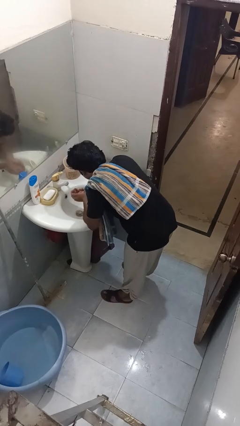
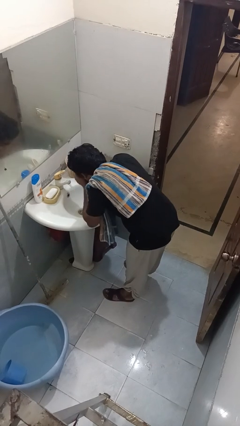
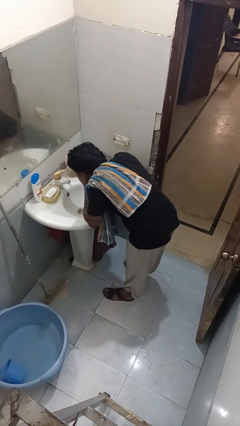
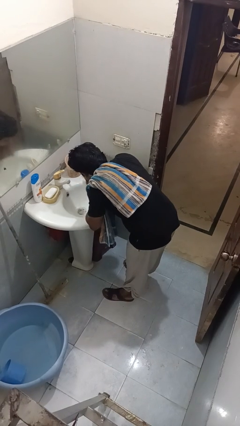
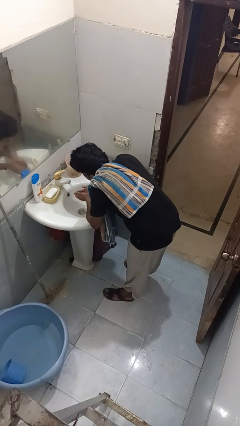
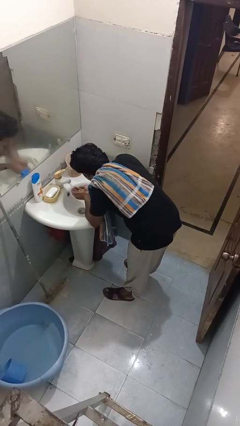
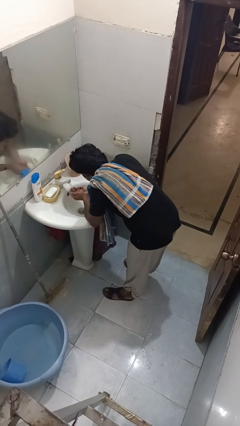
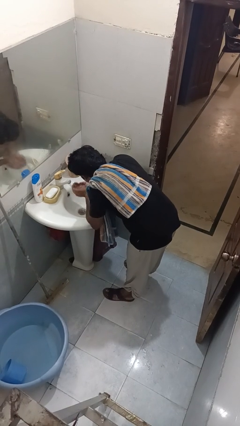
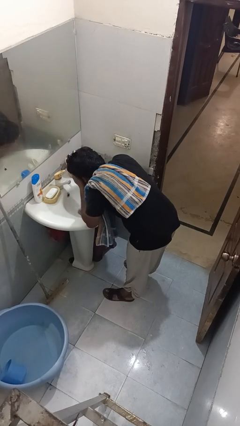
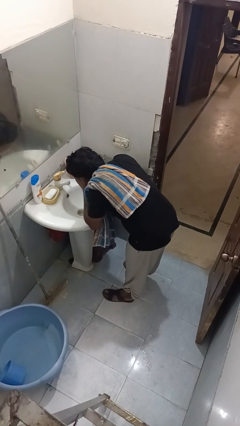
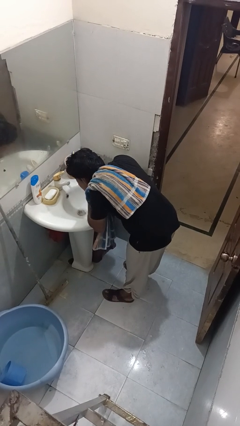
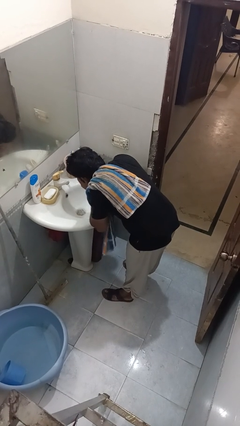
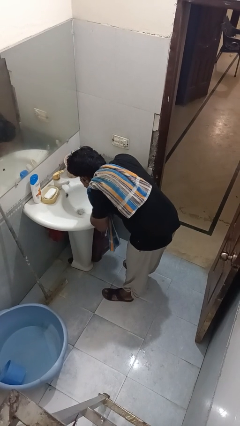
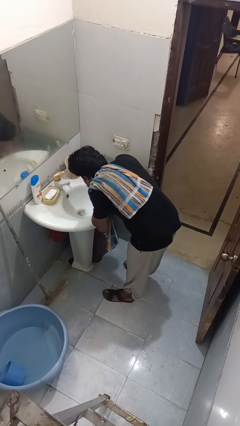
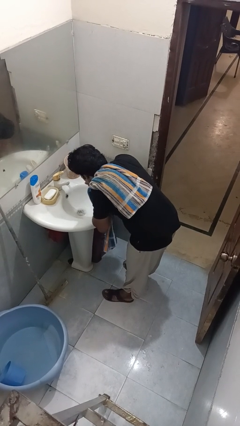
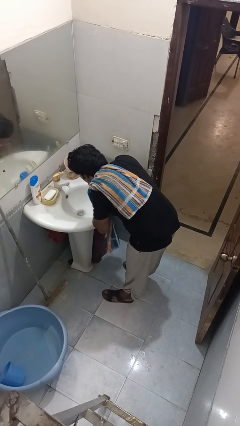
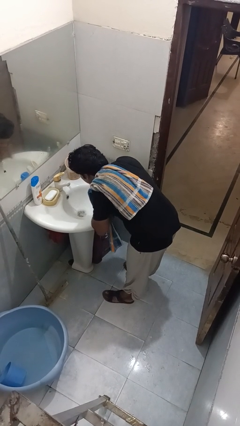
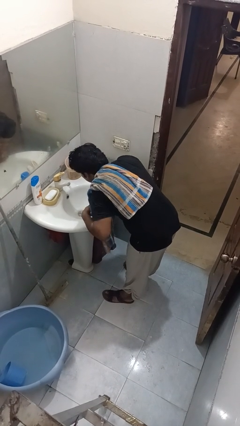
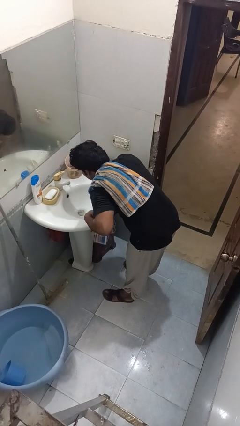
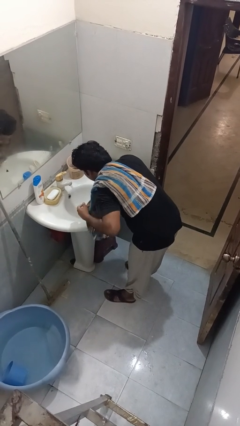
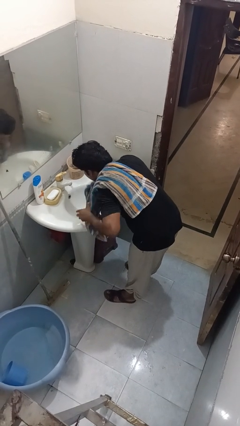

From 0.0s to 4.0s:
person washes face

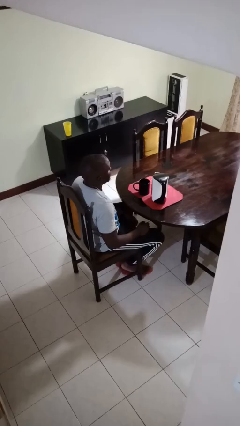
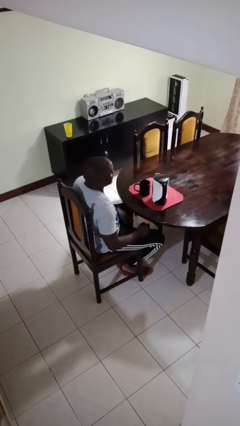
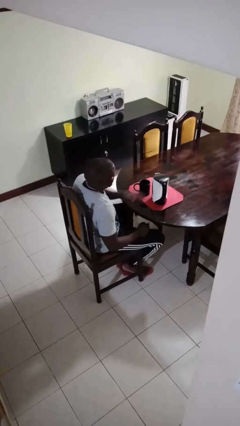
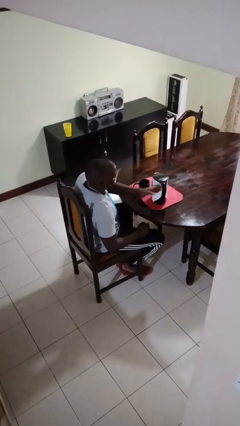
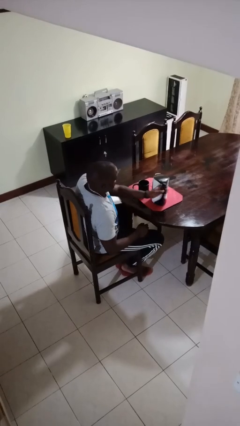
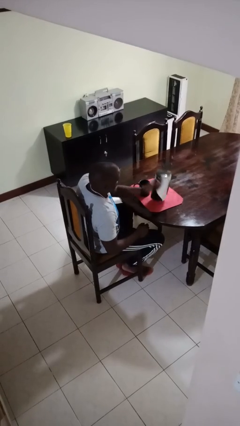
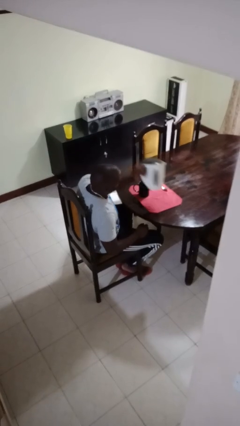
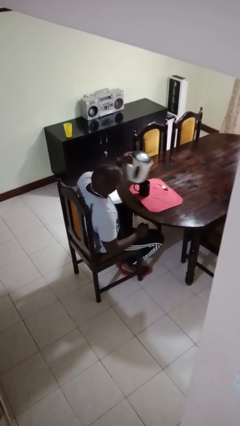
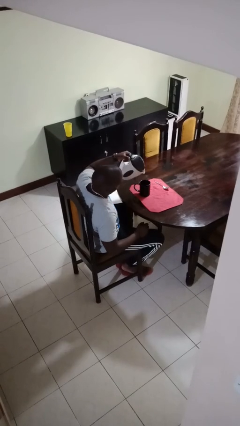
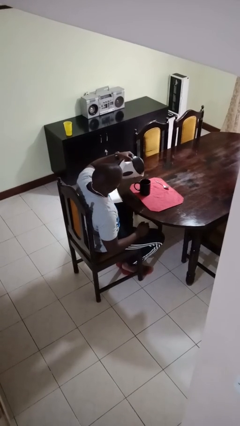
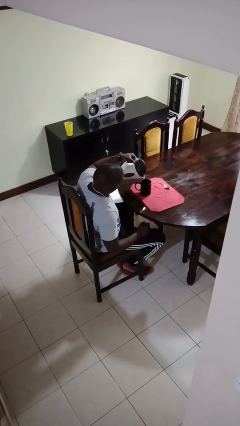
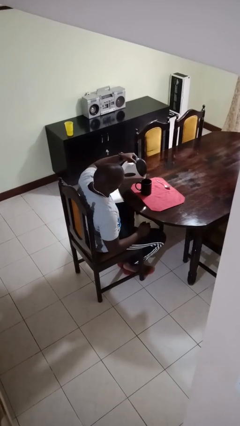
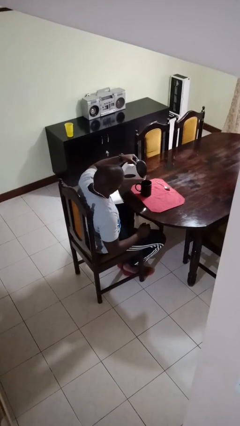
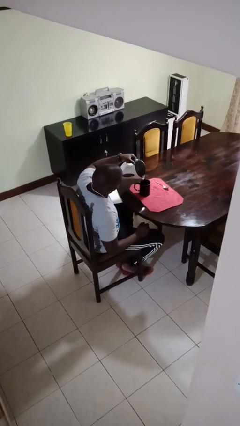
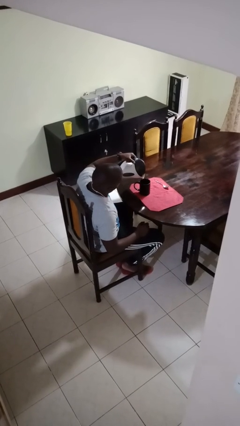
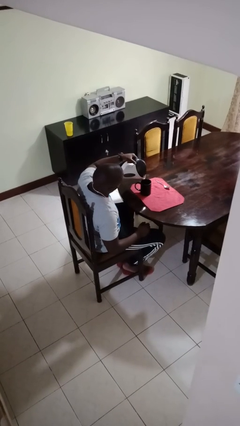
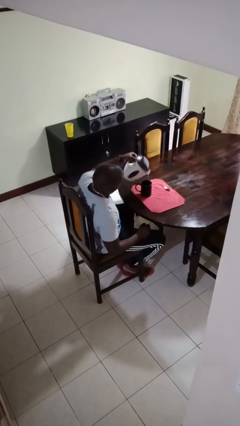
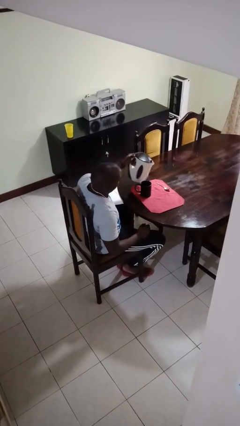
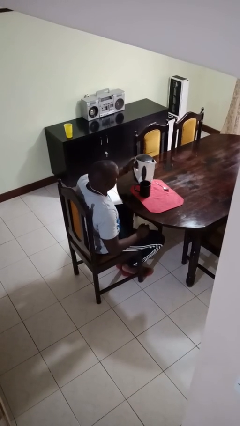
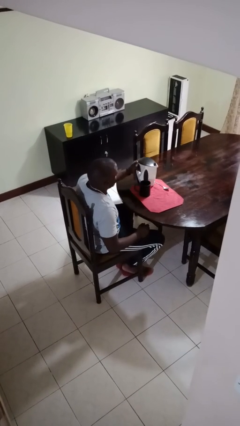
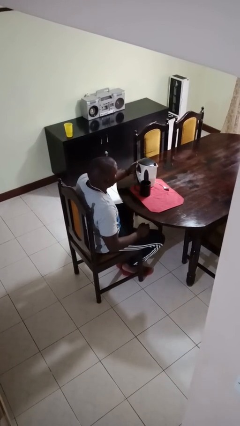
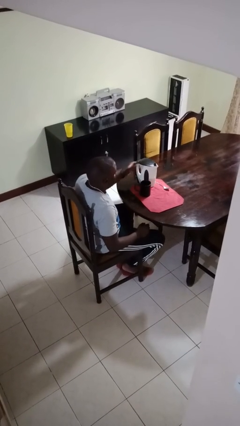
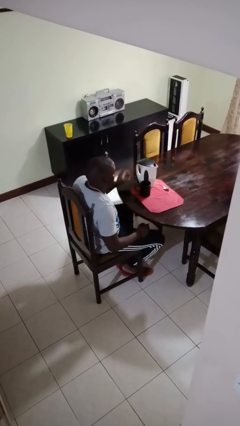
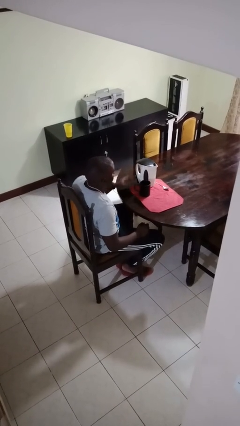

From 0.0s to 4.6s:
person pours coffee into mug

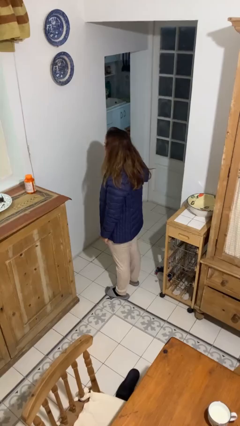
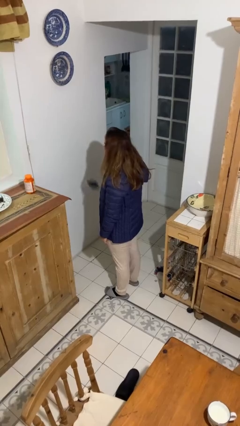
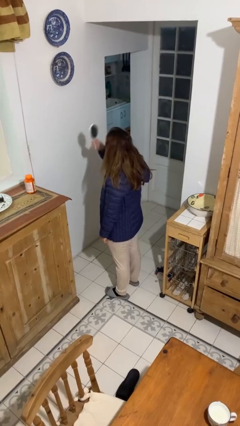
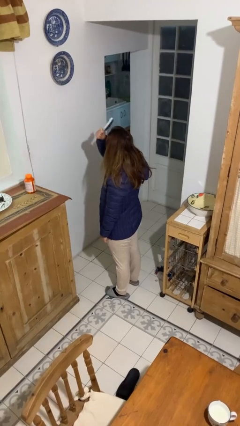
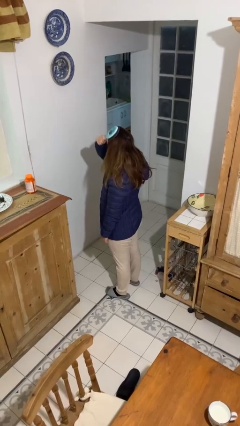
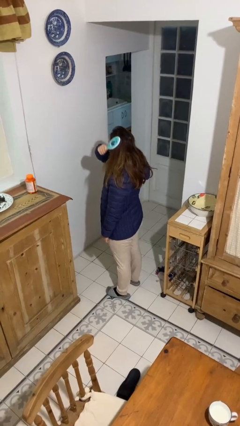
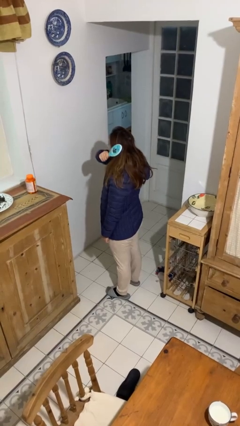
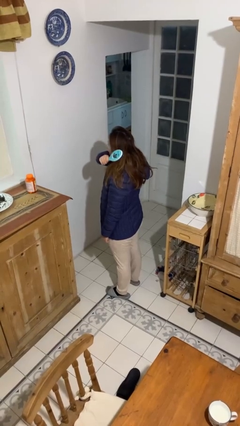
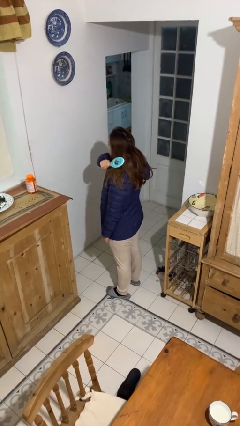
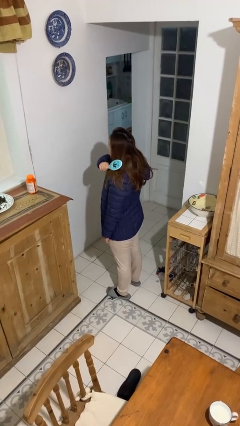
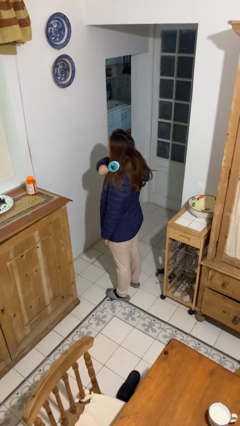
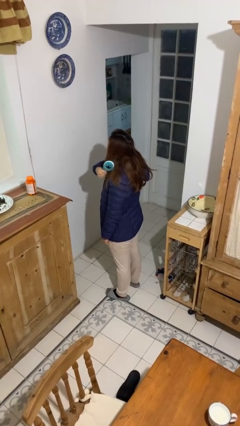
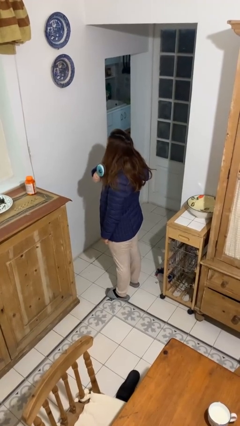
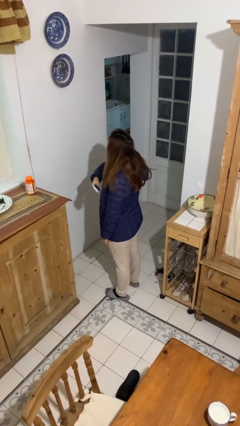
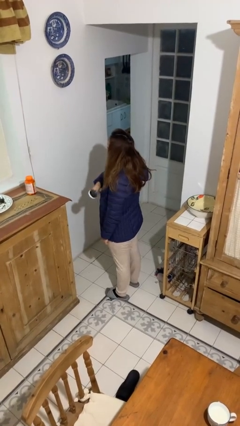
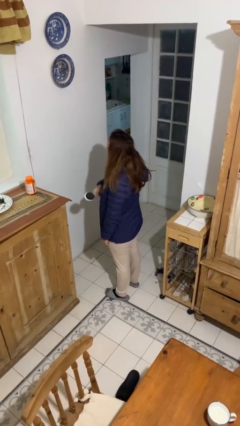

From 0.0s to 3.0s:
person brushes hair

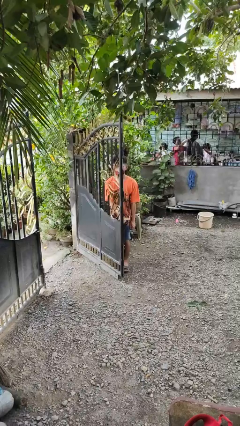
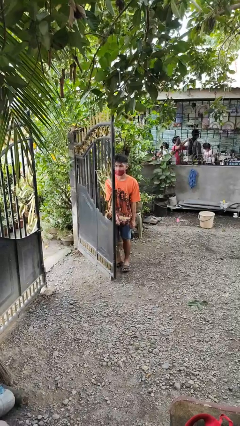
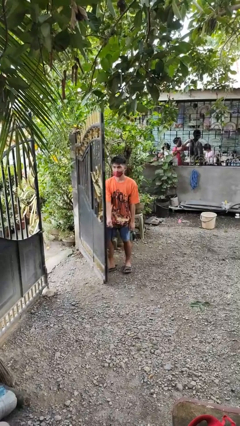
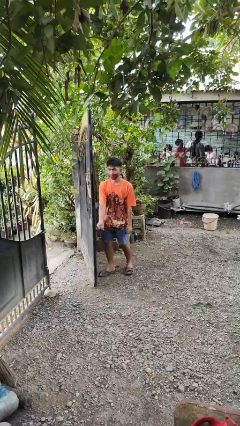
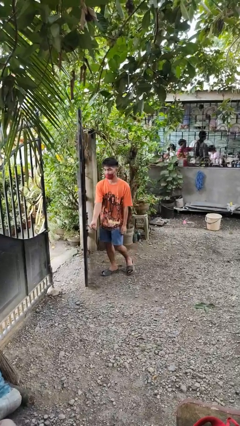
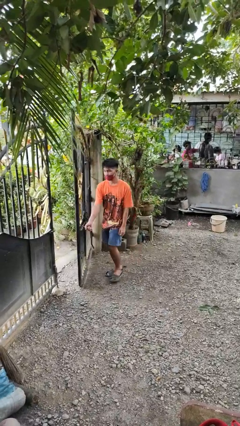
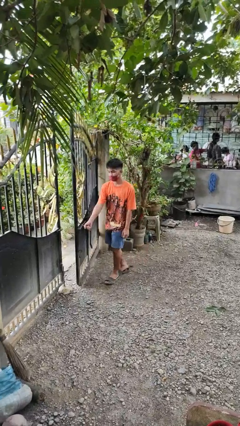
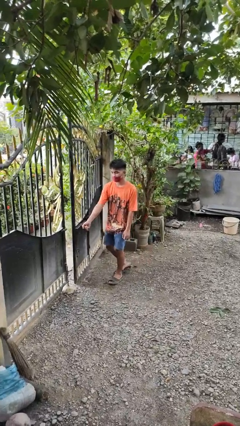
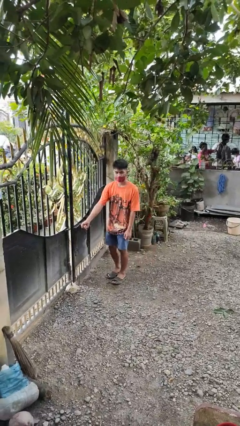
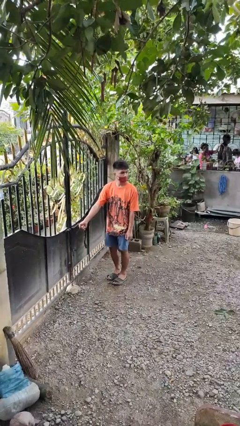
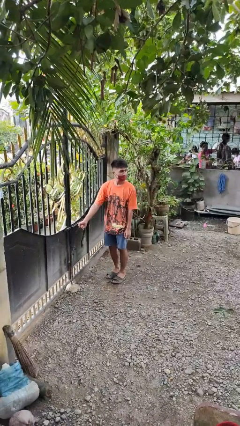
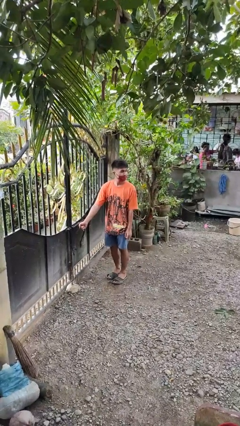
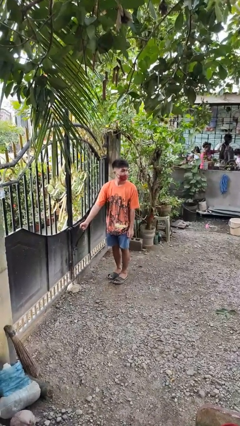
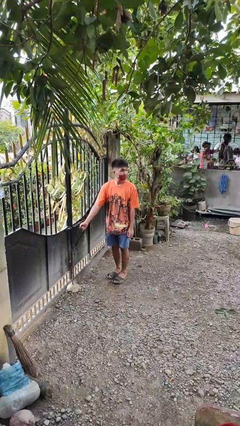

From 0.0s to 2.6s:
person closes gate

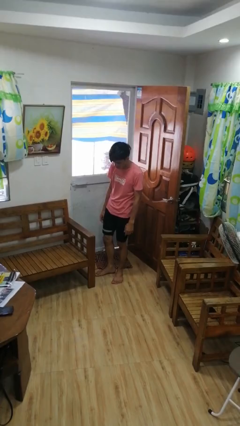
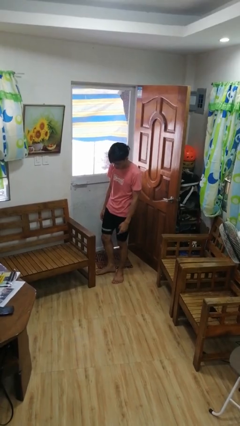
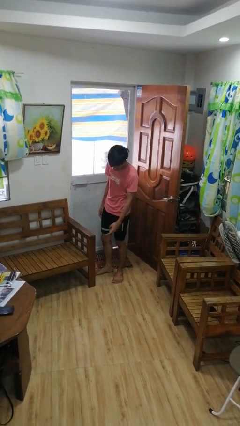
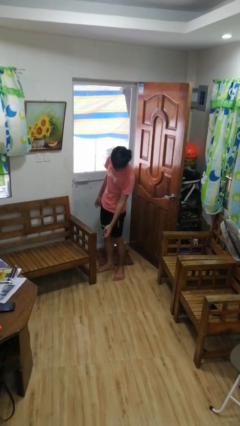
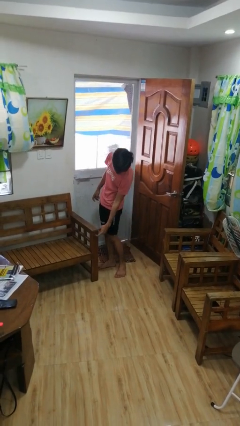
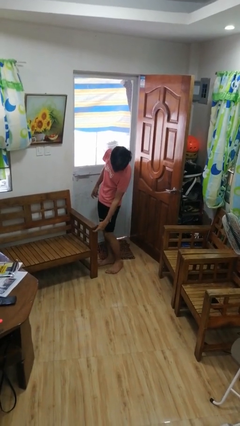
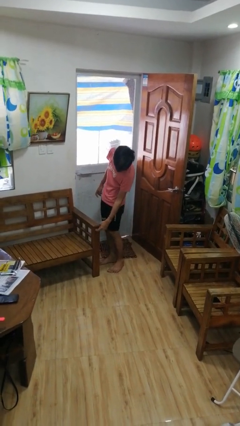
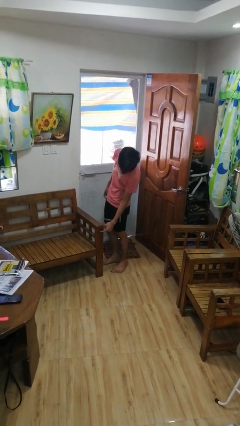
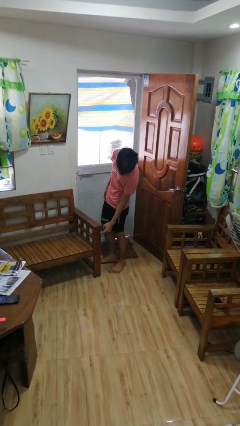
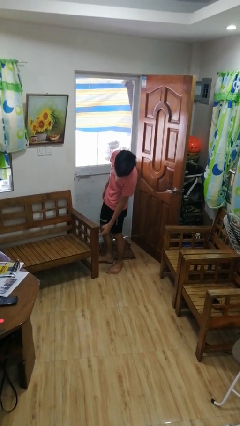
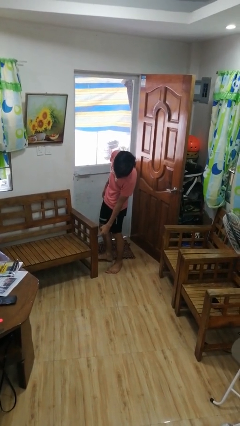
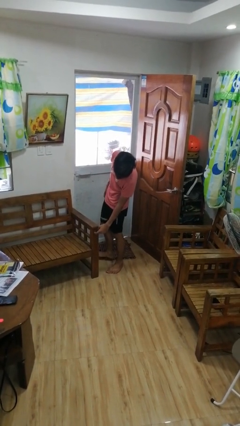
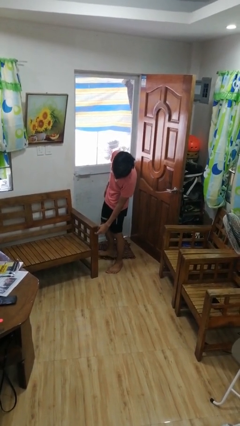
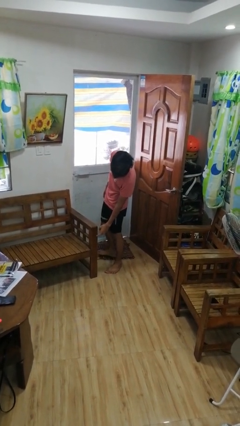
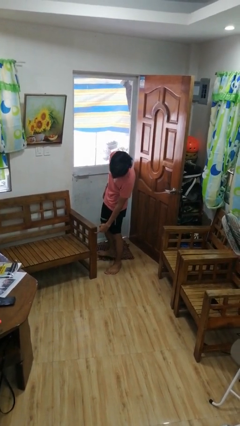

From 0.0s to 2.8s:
person taps object with finger

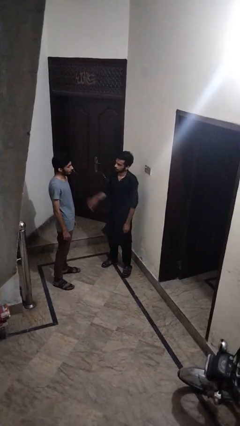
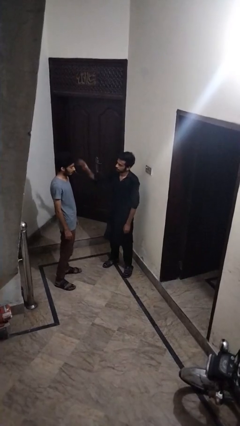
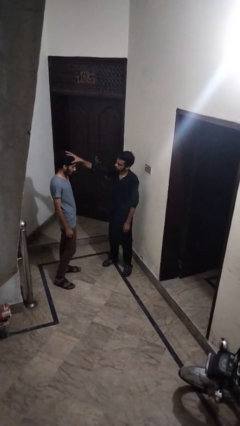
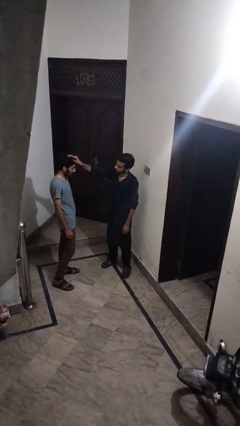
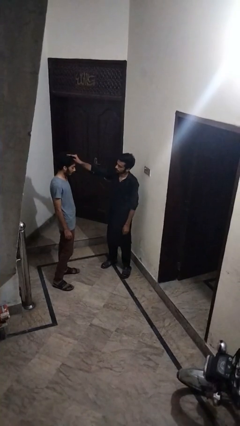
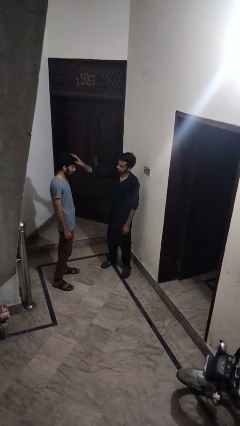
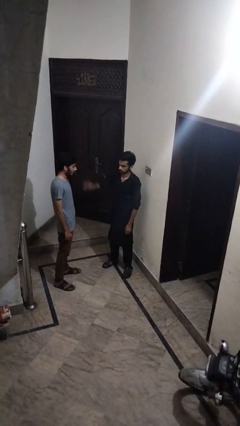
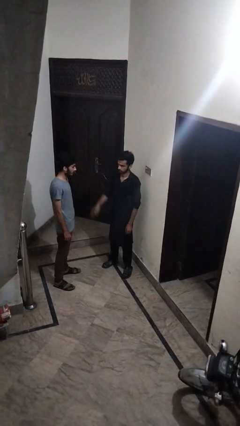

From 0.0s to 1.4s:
person grabs person by hair
